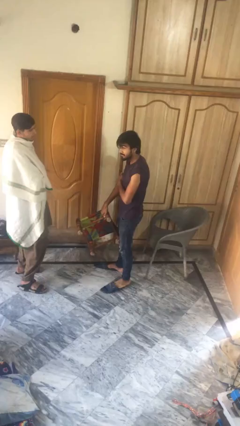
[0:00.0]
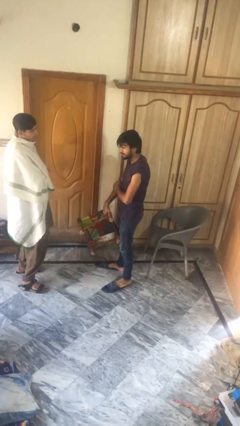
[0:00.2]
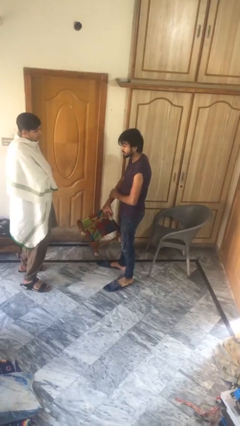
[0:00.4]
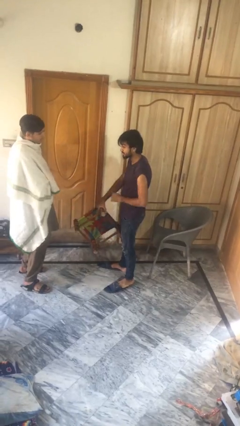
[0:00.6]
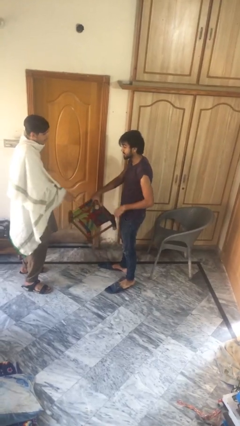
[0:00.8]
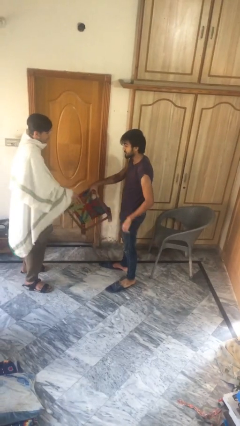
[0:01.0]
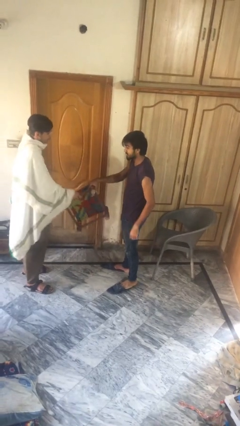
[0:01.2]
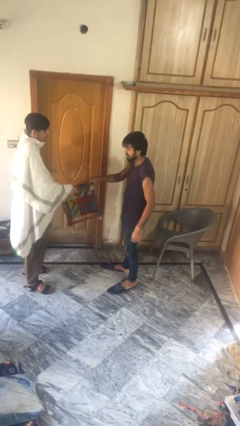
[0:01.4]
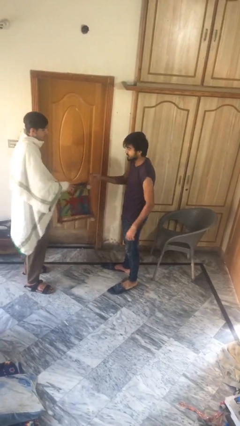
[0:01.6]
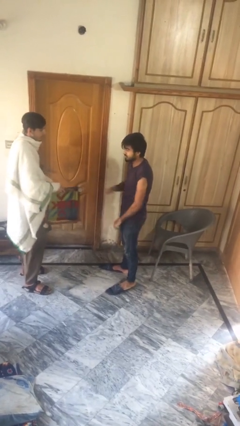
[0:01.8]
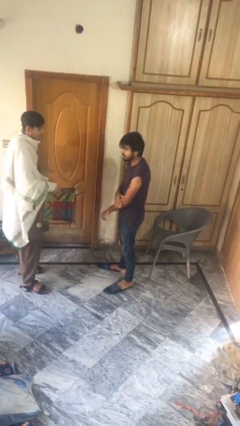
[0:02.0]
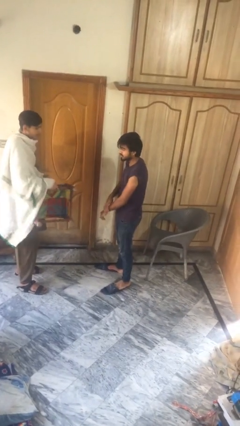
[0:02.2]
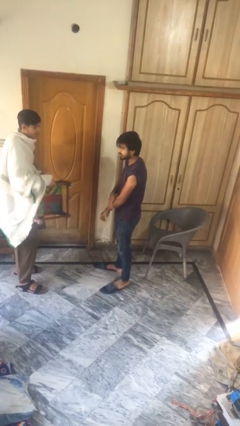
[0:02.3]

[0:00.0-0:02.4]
person transfers object to person

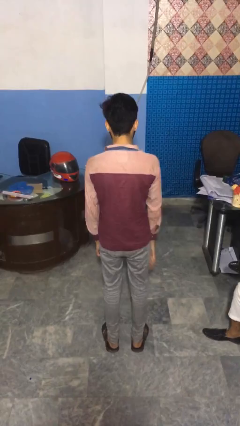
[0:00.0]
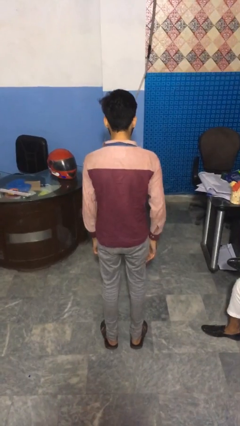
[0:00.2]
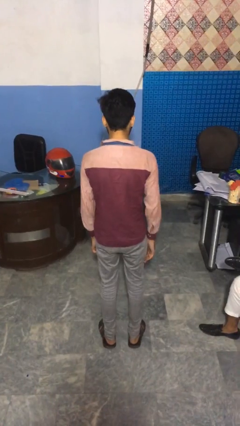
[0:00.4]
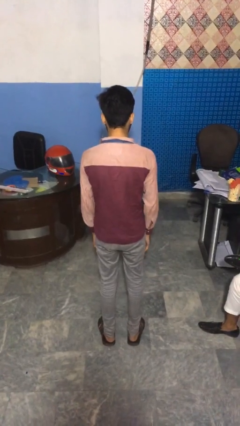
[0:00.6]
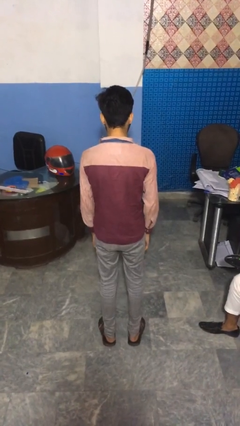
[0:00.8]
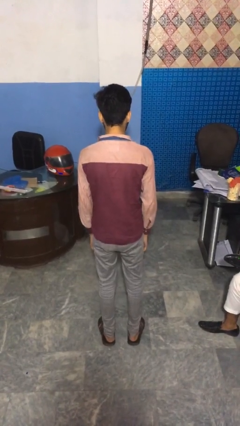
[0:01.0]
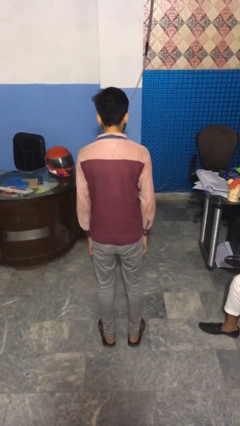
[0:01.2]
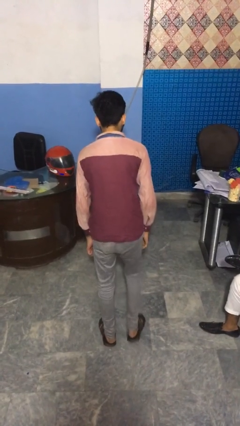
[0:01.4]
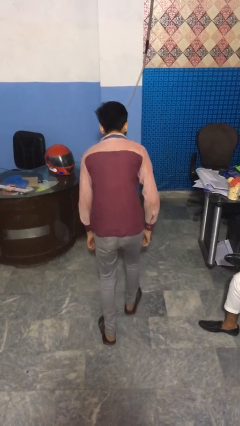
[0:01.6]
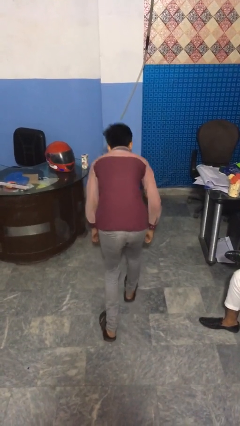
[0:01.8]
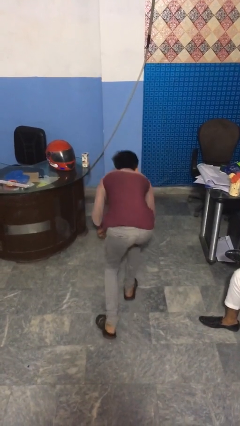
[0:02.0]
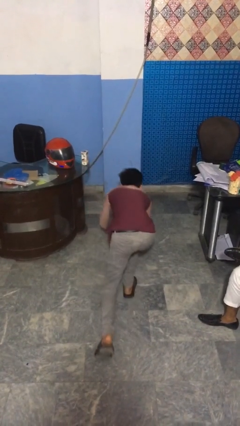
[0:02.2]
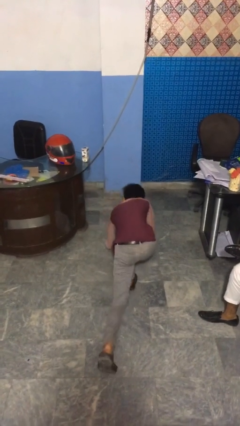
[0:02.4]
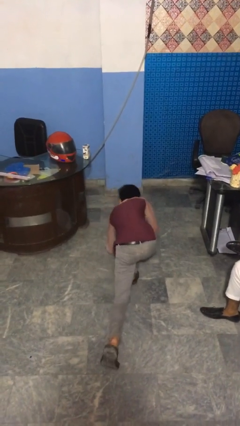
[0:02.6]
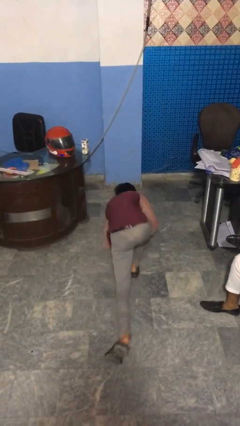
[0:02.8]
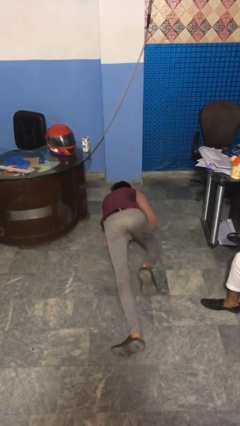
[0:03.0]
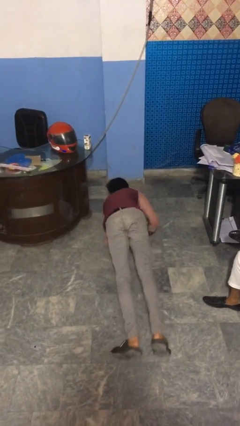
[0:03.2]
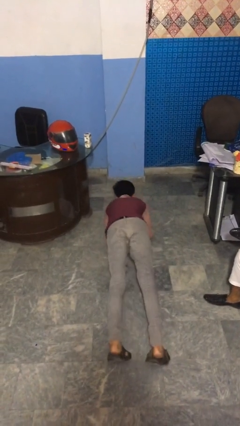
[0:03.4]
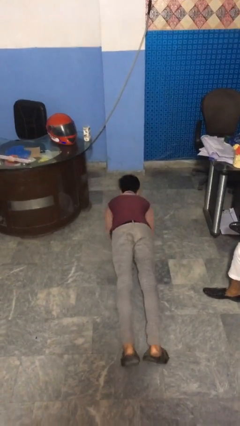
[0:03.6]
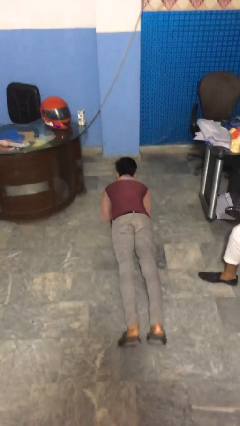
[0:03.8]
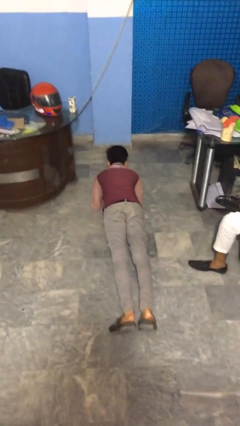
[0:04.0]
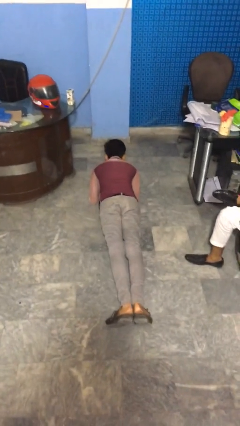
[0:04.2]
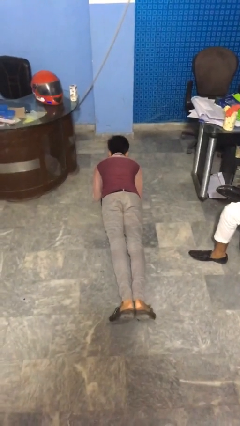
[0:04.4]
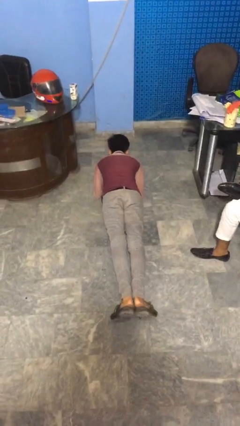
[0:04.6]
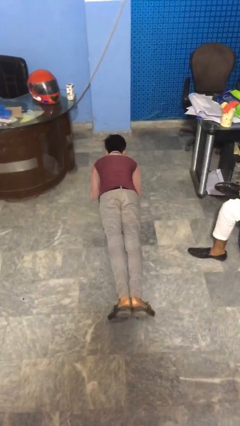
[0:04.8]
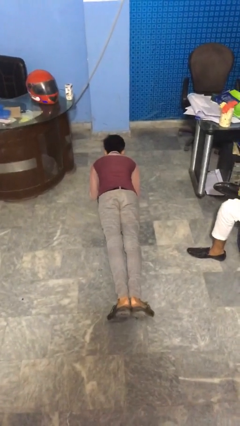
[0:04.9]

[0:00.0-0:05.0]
person exercises with plank

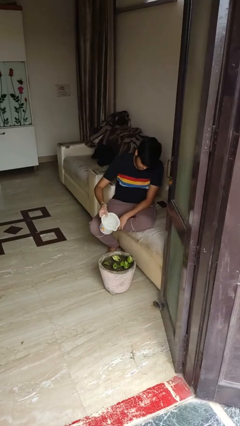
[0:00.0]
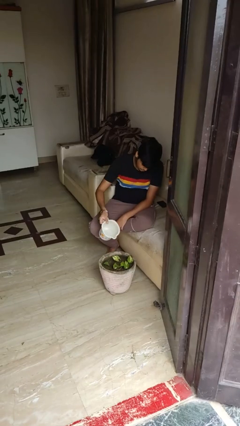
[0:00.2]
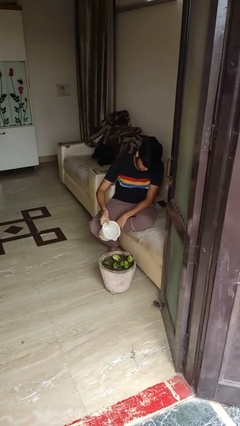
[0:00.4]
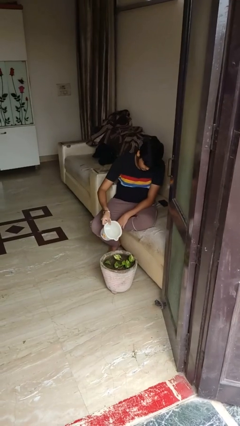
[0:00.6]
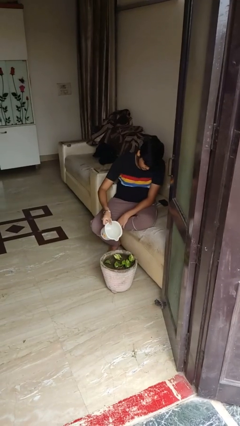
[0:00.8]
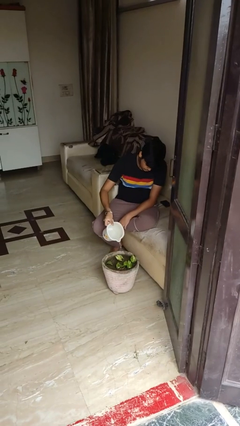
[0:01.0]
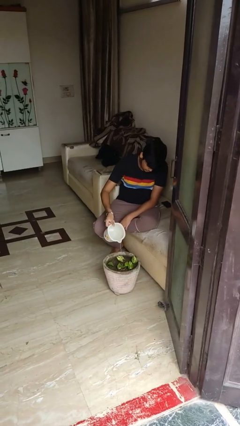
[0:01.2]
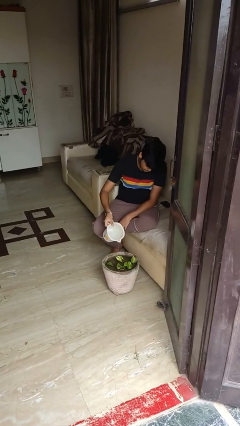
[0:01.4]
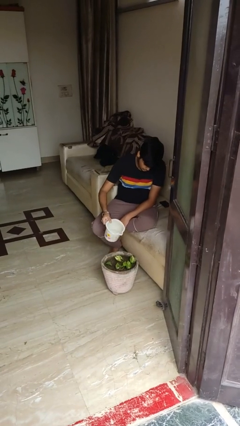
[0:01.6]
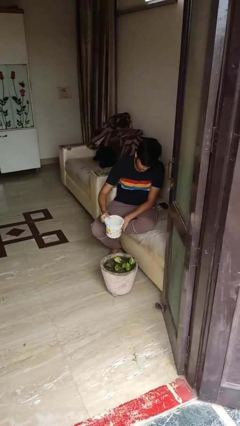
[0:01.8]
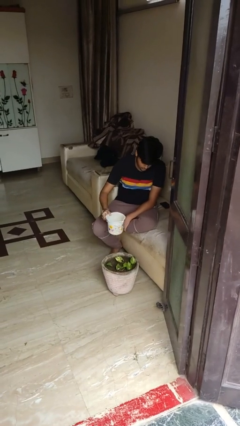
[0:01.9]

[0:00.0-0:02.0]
person waters houseplant

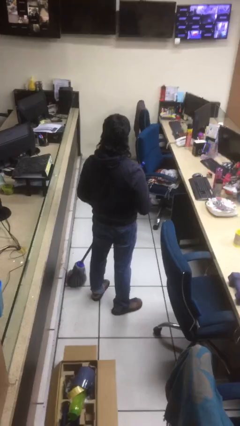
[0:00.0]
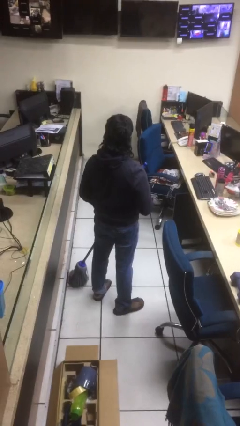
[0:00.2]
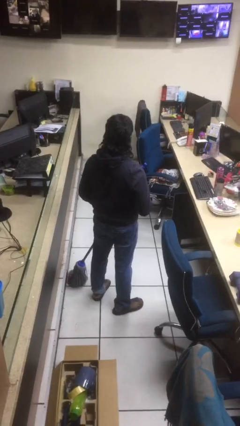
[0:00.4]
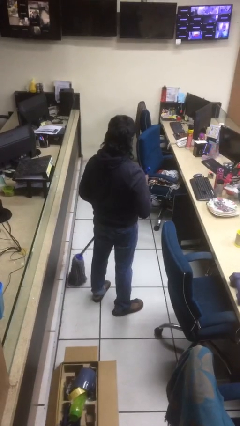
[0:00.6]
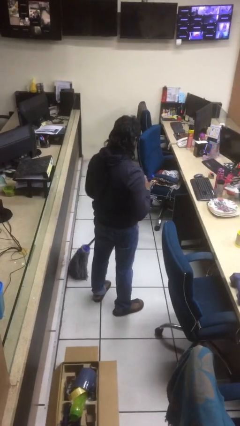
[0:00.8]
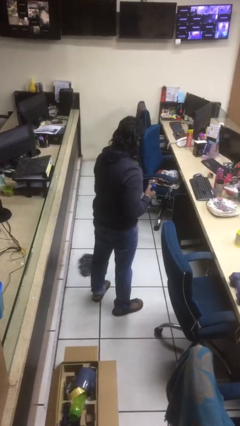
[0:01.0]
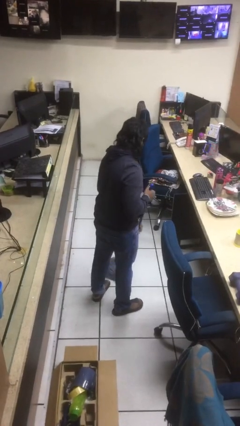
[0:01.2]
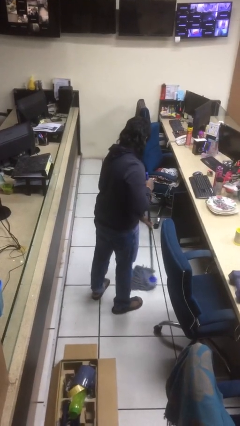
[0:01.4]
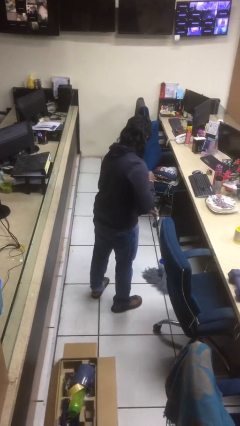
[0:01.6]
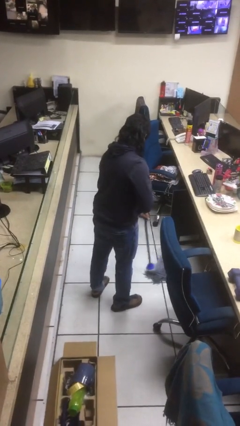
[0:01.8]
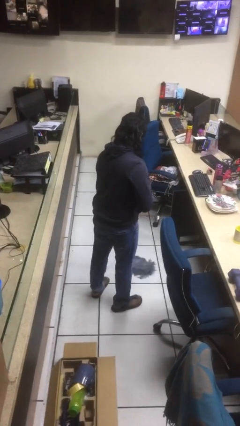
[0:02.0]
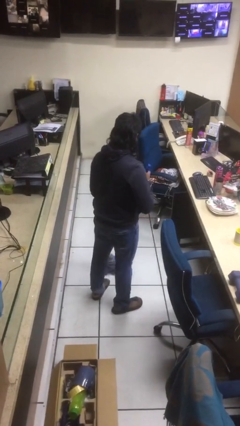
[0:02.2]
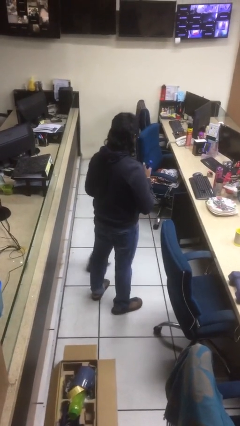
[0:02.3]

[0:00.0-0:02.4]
person mops

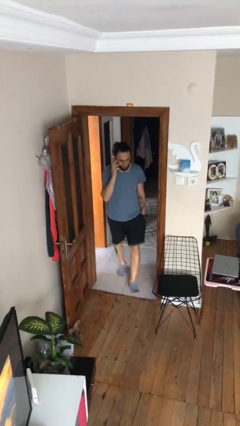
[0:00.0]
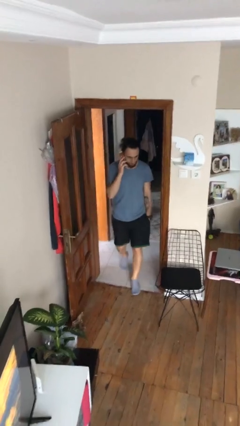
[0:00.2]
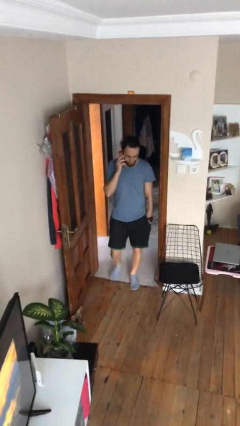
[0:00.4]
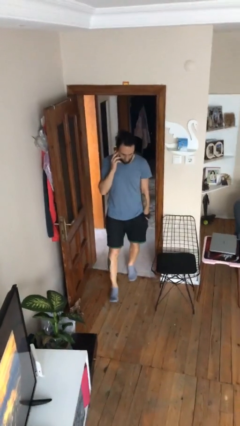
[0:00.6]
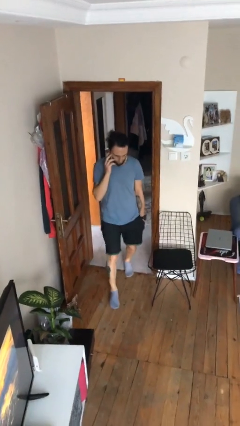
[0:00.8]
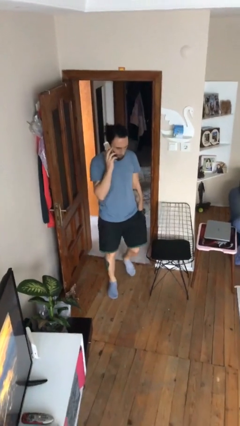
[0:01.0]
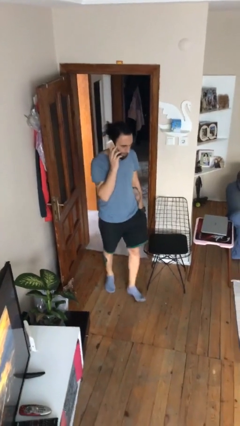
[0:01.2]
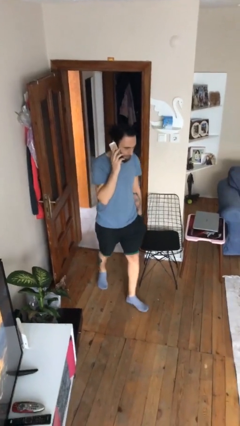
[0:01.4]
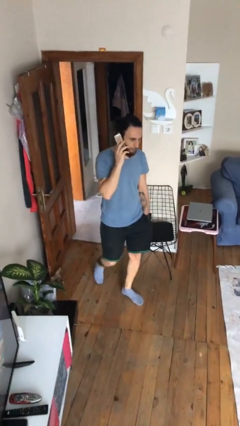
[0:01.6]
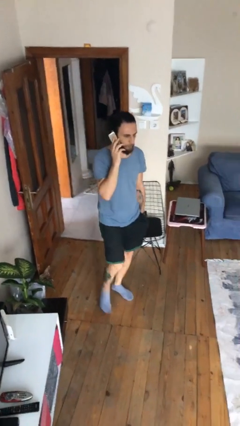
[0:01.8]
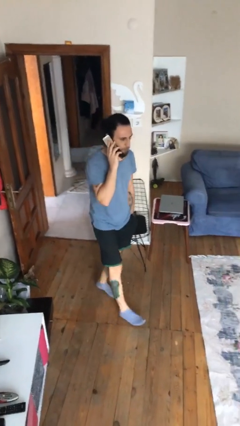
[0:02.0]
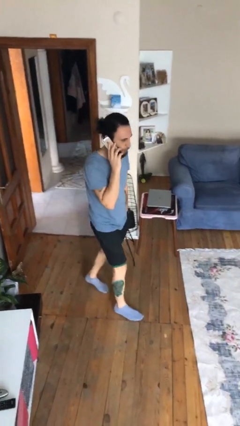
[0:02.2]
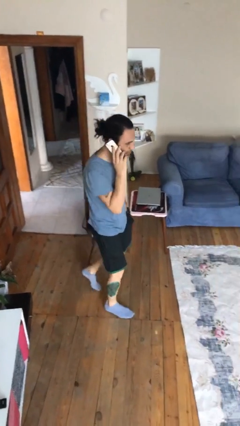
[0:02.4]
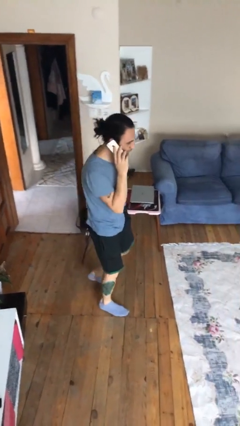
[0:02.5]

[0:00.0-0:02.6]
person enters scene through structure

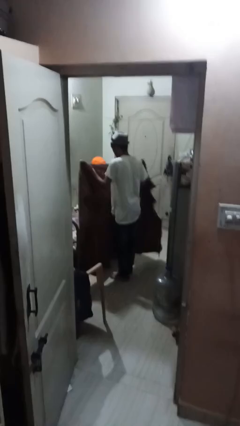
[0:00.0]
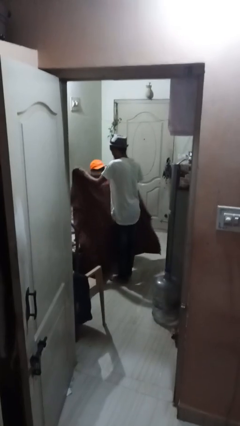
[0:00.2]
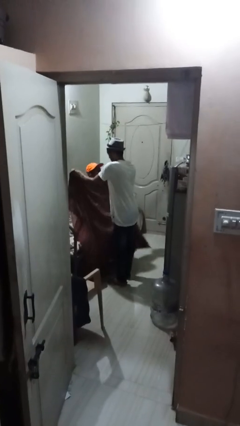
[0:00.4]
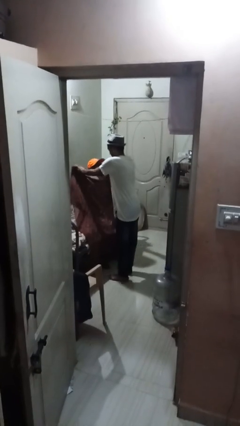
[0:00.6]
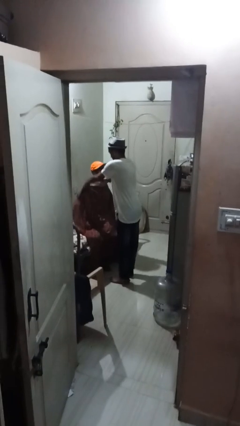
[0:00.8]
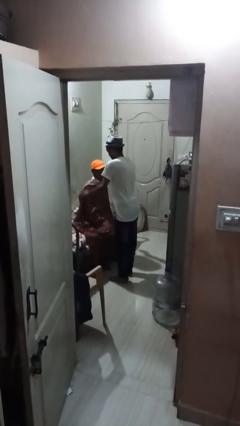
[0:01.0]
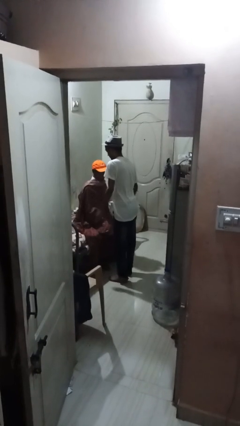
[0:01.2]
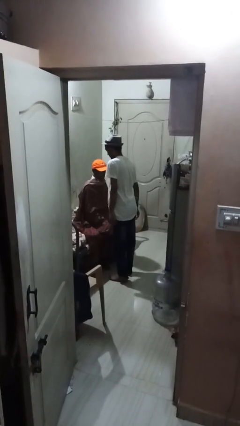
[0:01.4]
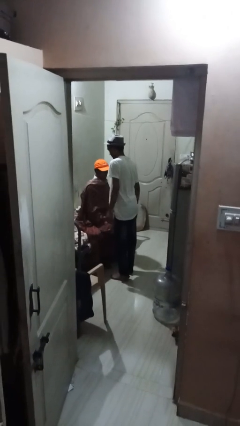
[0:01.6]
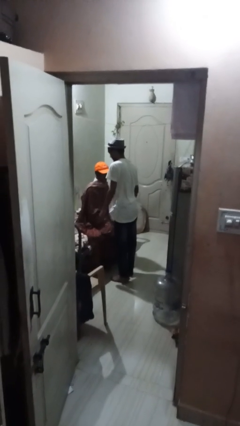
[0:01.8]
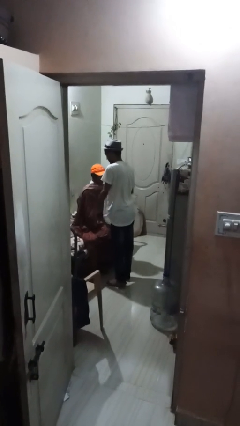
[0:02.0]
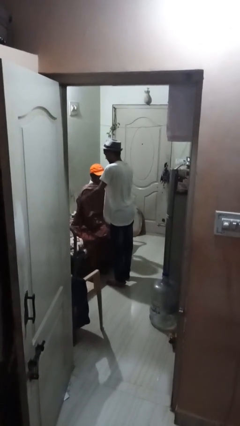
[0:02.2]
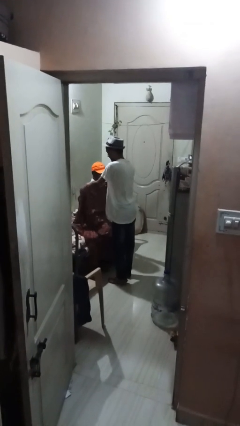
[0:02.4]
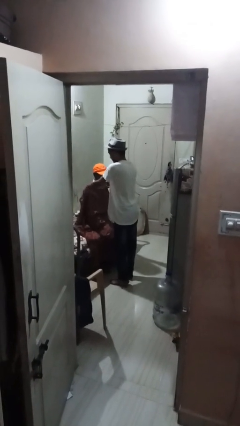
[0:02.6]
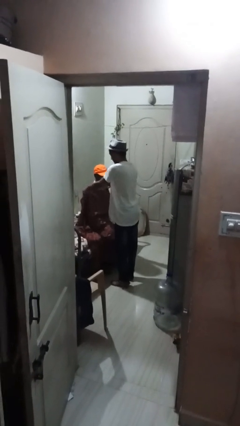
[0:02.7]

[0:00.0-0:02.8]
person covers friend with blanket
